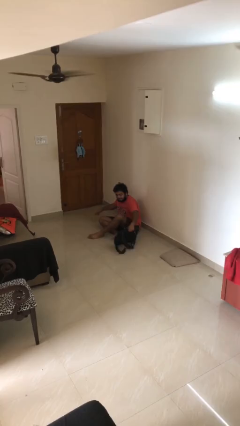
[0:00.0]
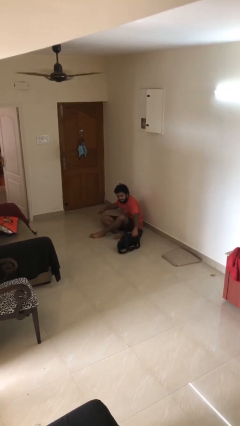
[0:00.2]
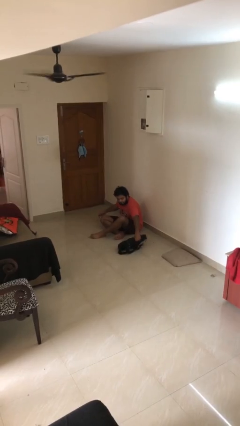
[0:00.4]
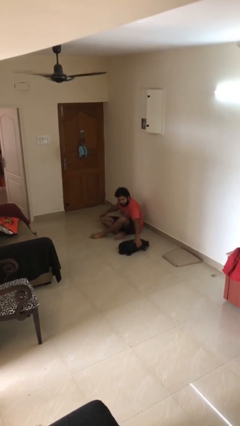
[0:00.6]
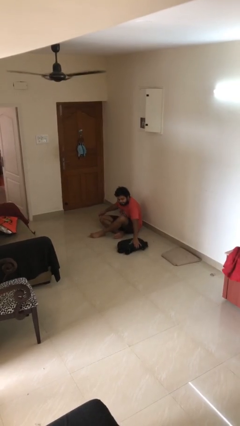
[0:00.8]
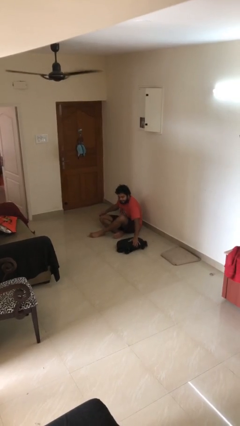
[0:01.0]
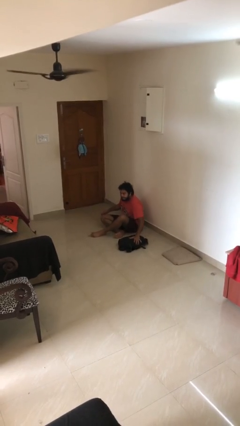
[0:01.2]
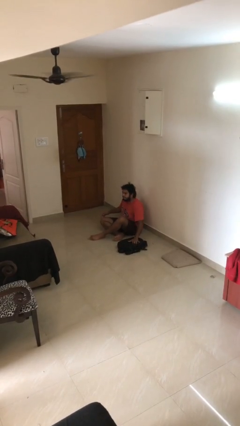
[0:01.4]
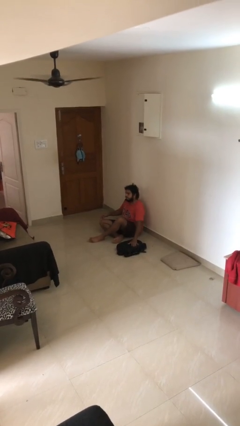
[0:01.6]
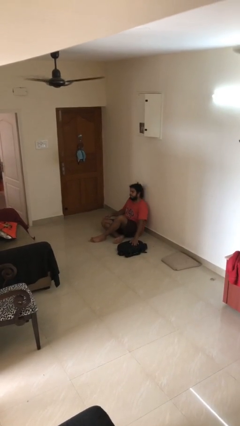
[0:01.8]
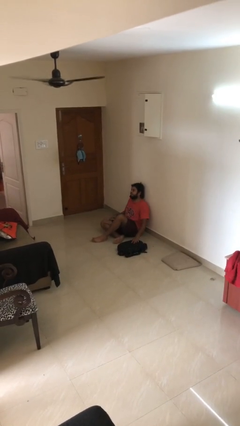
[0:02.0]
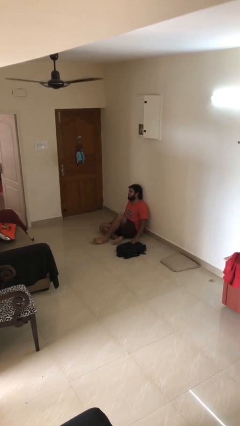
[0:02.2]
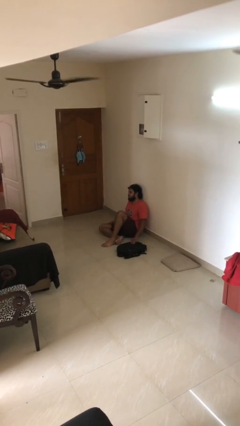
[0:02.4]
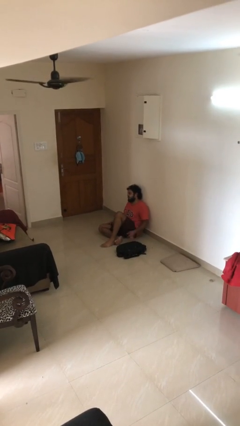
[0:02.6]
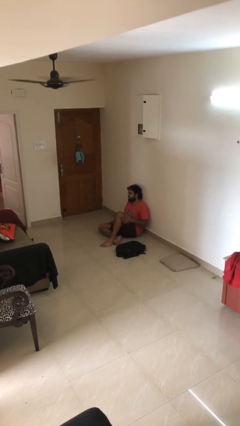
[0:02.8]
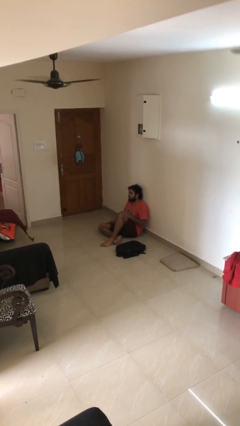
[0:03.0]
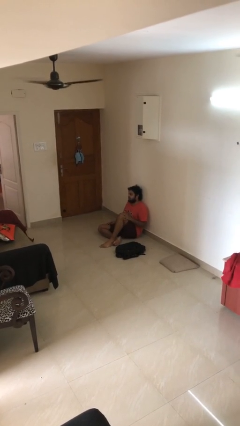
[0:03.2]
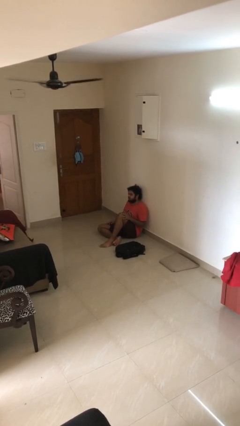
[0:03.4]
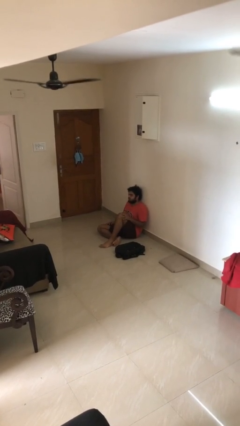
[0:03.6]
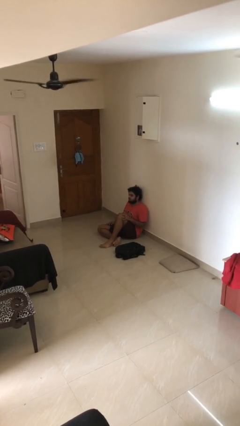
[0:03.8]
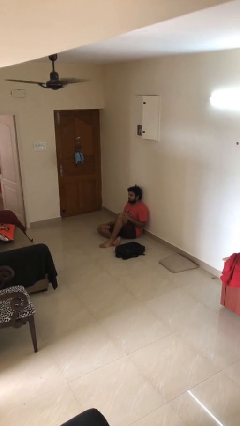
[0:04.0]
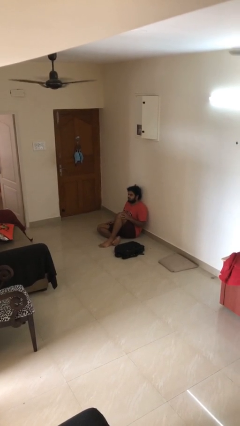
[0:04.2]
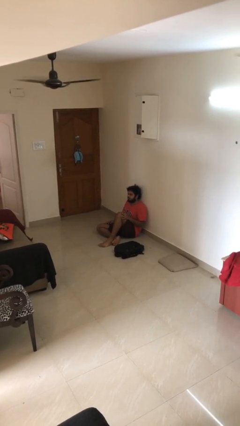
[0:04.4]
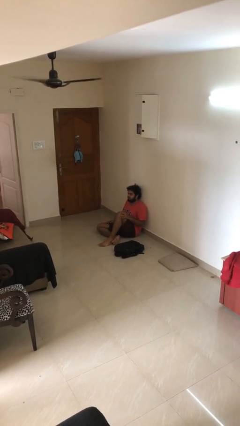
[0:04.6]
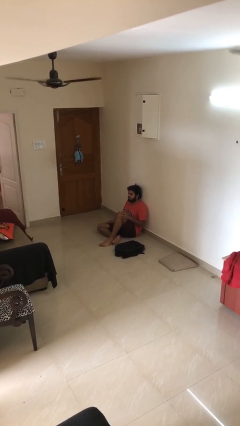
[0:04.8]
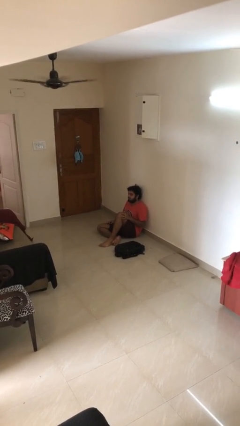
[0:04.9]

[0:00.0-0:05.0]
person puts down object on floor

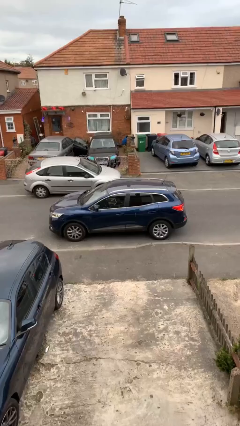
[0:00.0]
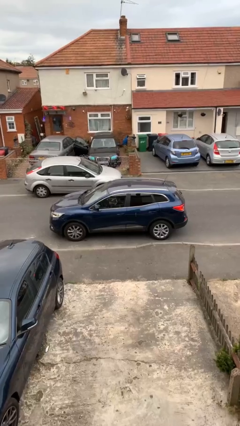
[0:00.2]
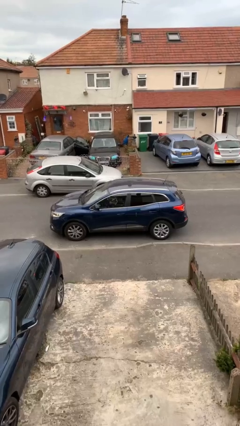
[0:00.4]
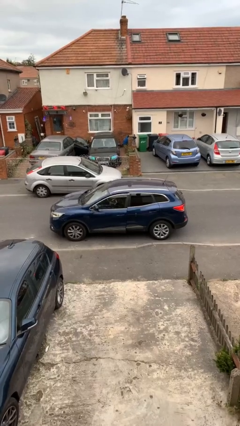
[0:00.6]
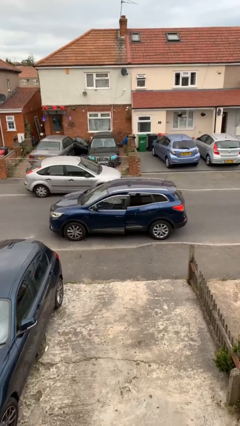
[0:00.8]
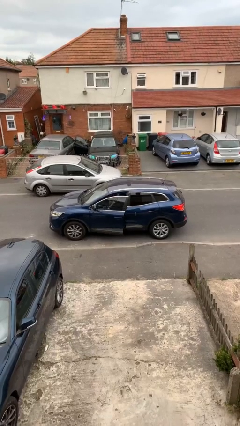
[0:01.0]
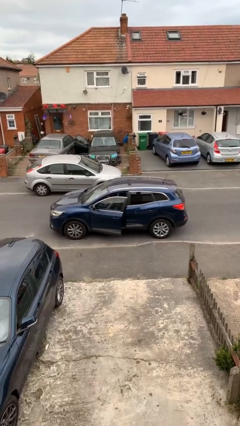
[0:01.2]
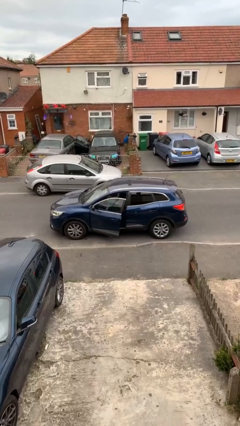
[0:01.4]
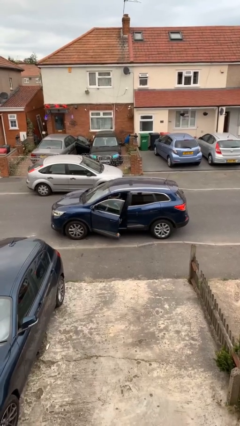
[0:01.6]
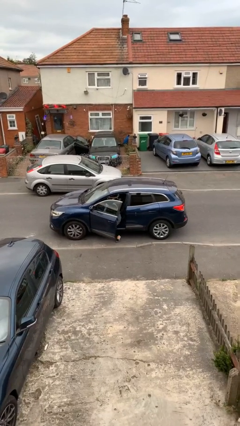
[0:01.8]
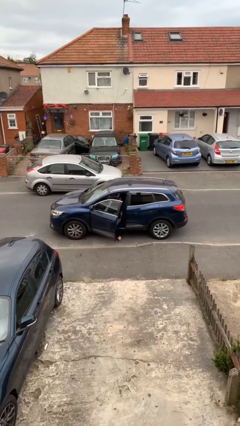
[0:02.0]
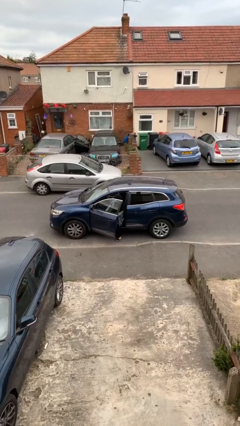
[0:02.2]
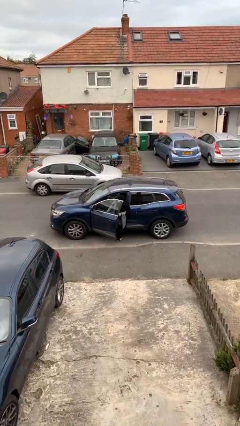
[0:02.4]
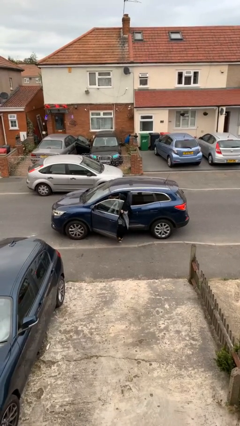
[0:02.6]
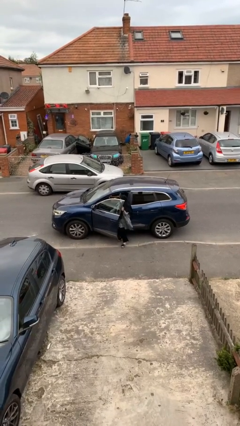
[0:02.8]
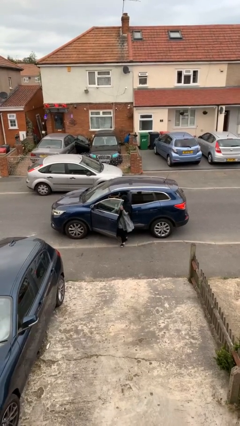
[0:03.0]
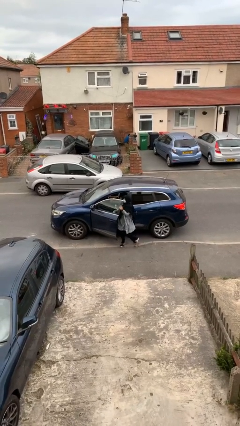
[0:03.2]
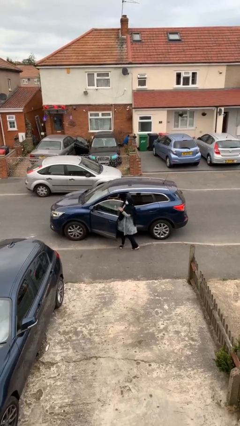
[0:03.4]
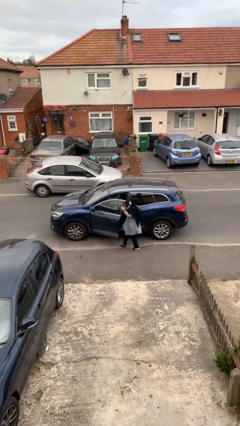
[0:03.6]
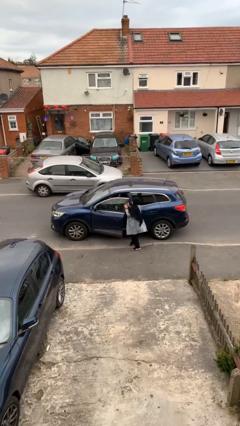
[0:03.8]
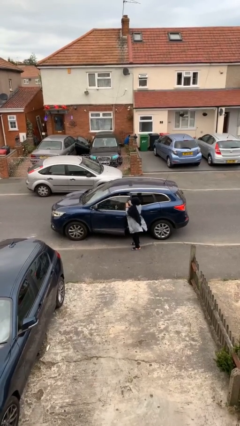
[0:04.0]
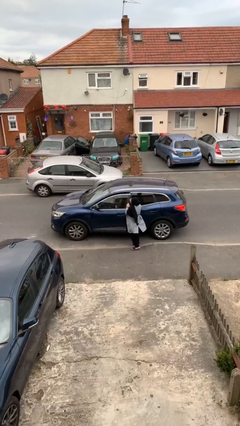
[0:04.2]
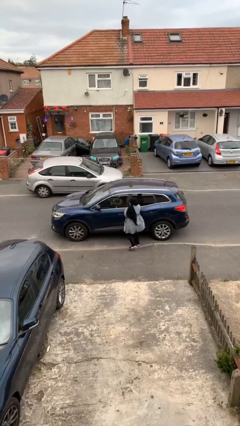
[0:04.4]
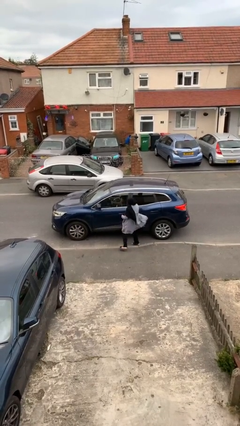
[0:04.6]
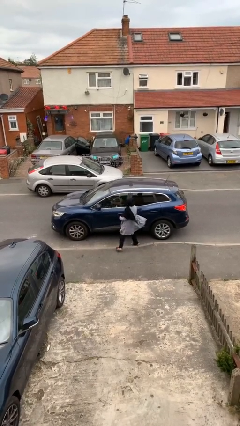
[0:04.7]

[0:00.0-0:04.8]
car drops off person

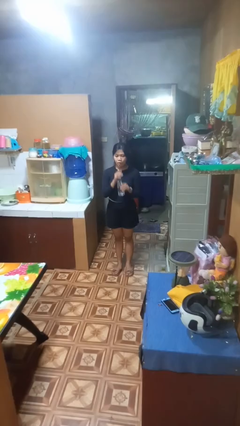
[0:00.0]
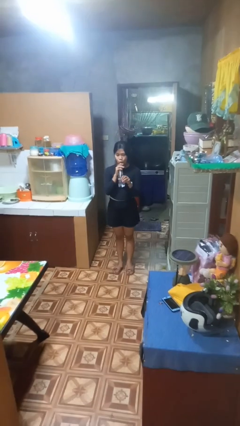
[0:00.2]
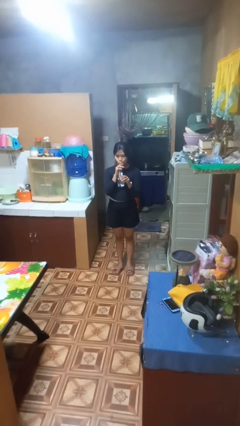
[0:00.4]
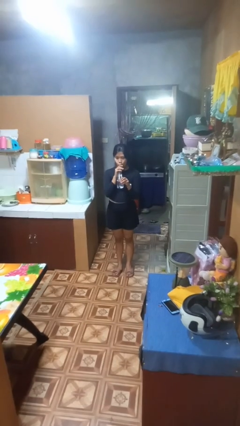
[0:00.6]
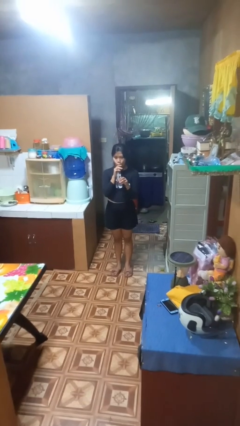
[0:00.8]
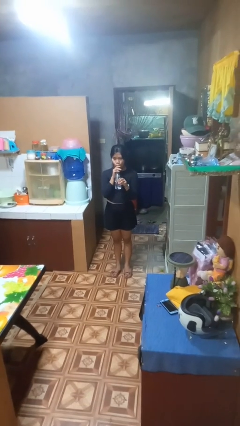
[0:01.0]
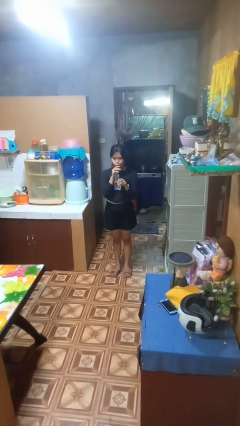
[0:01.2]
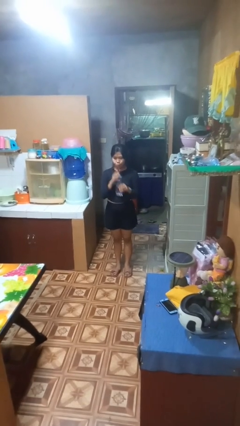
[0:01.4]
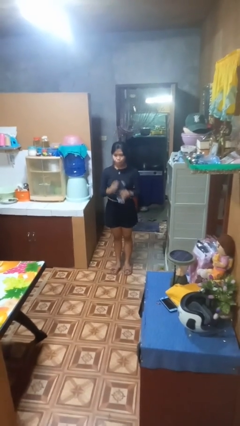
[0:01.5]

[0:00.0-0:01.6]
person drinks from straw

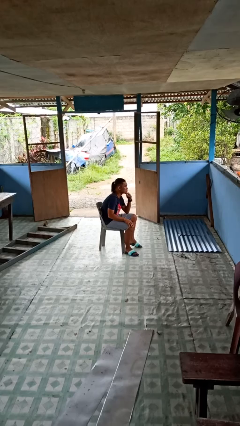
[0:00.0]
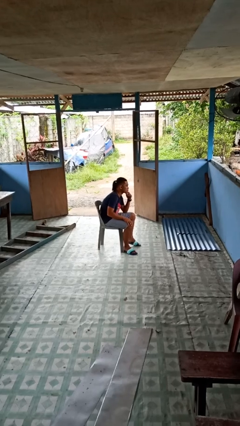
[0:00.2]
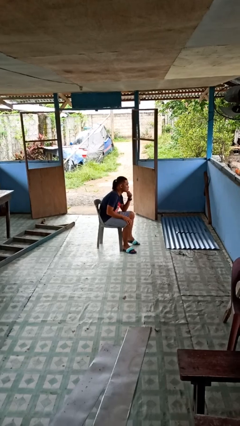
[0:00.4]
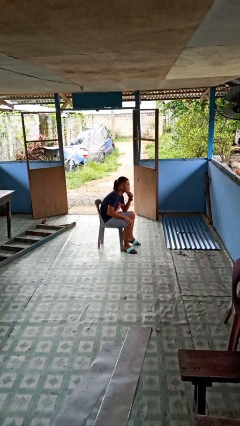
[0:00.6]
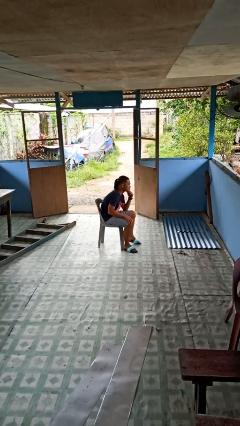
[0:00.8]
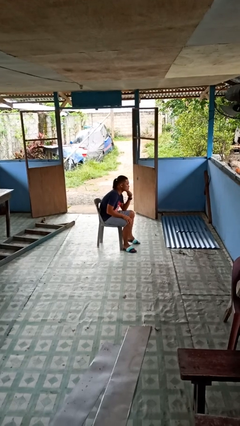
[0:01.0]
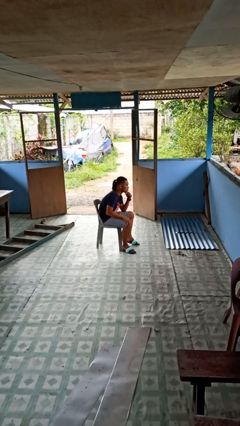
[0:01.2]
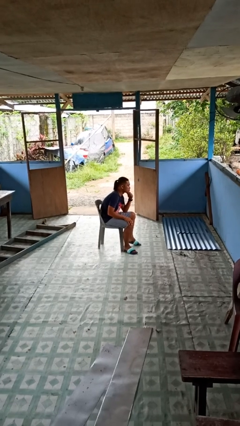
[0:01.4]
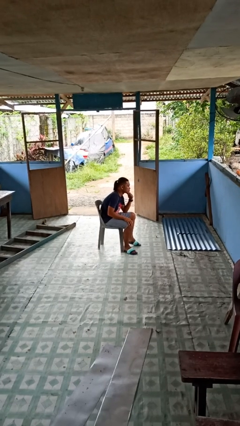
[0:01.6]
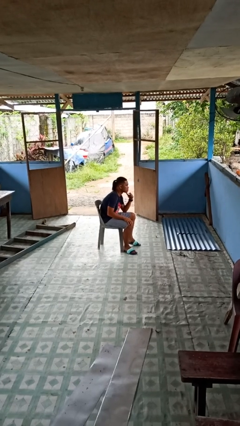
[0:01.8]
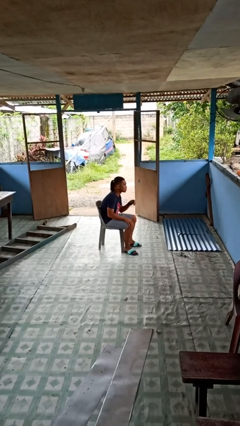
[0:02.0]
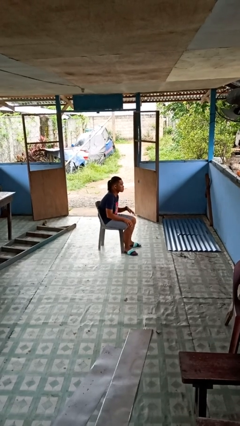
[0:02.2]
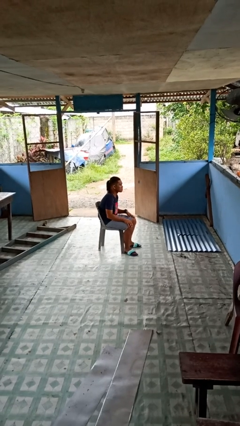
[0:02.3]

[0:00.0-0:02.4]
person strokes chin

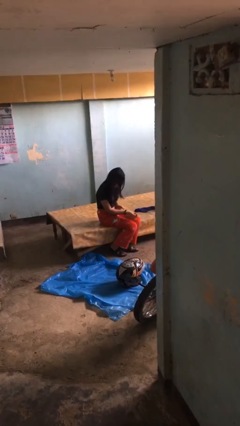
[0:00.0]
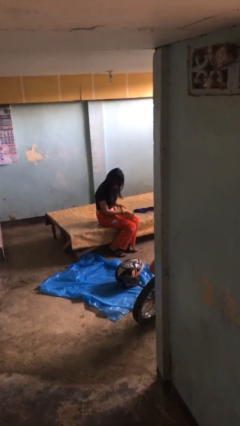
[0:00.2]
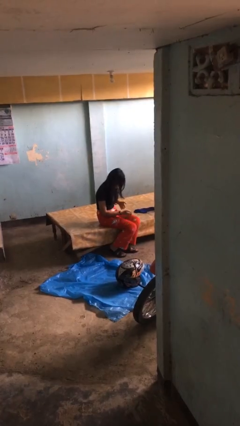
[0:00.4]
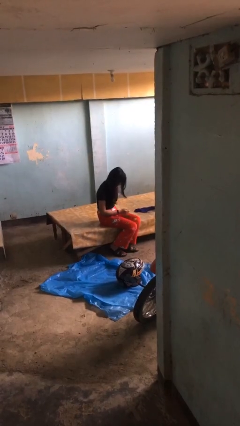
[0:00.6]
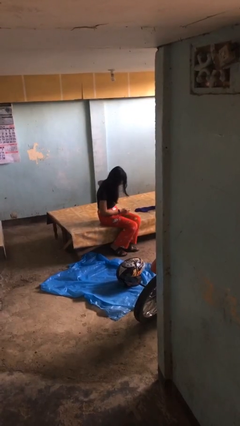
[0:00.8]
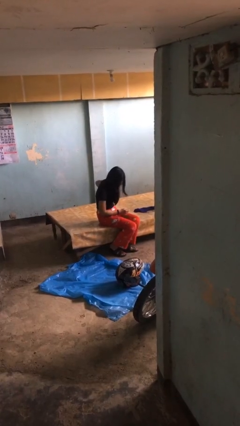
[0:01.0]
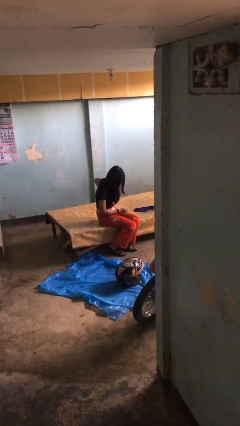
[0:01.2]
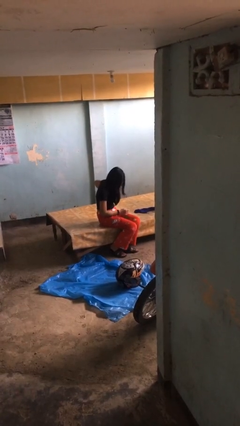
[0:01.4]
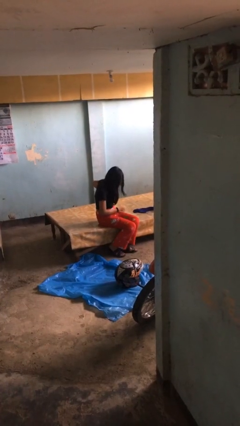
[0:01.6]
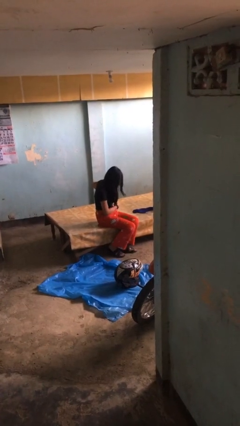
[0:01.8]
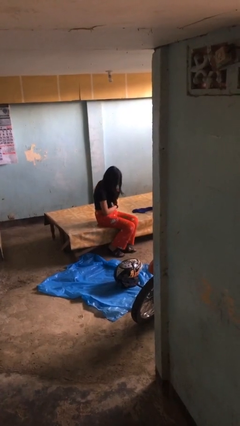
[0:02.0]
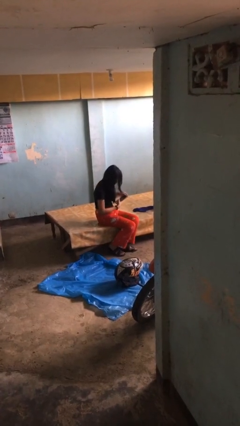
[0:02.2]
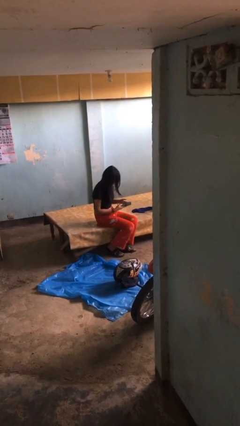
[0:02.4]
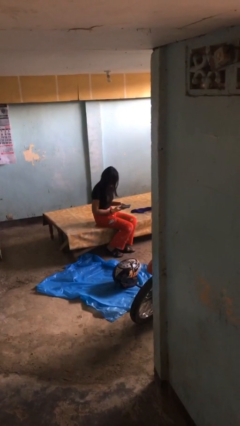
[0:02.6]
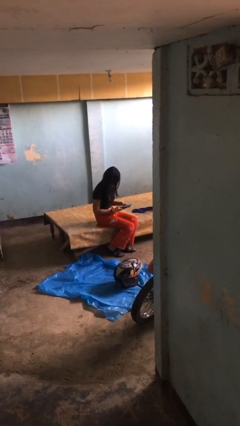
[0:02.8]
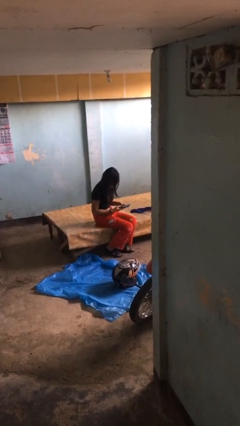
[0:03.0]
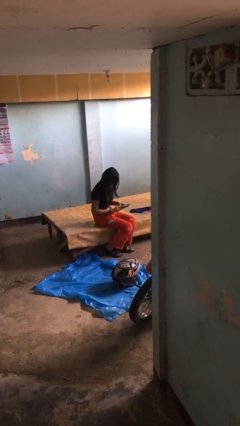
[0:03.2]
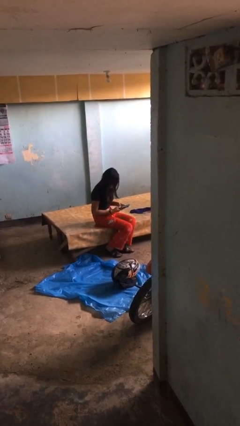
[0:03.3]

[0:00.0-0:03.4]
person takes phone from pocket
